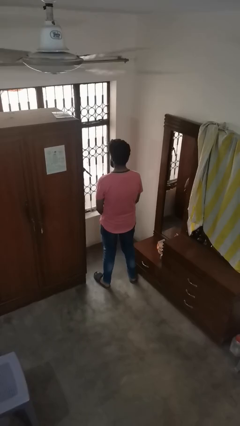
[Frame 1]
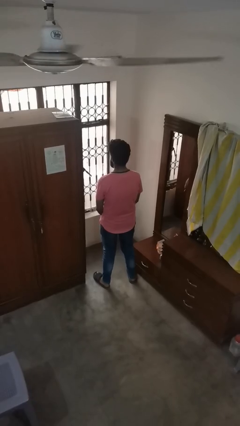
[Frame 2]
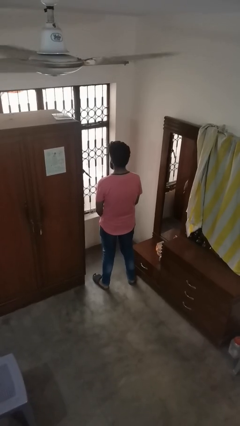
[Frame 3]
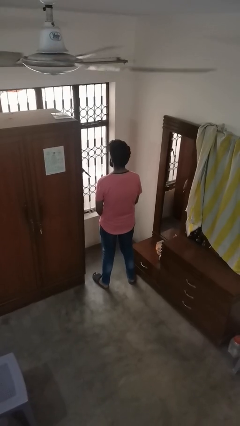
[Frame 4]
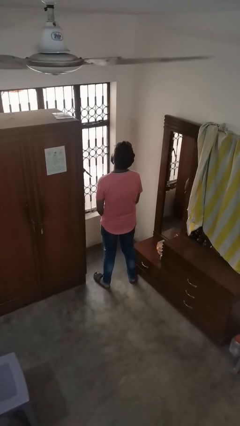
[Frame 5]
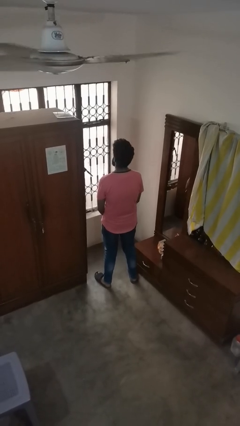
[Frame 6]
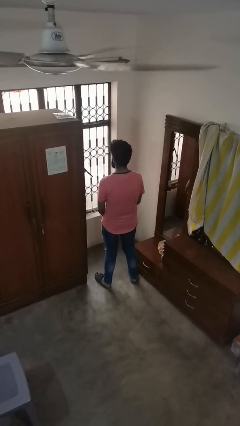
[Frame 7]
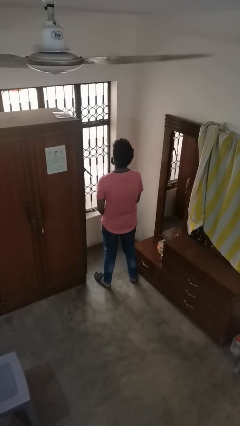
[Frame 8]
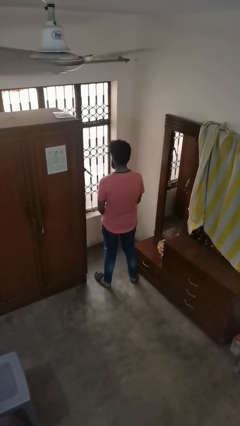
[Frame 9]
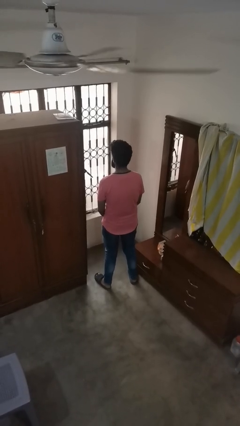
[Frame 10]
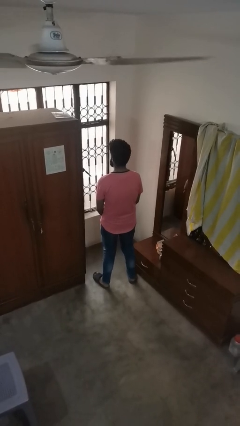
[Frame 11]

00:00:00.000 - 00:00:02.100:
person nods head

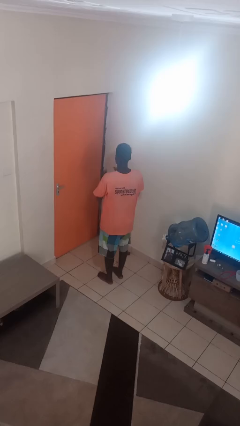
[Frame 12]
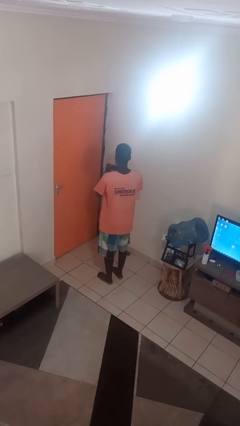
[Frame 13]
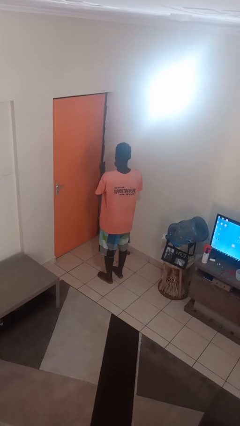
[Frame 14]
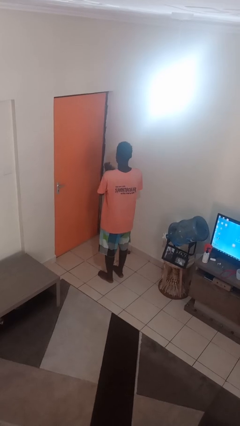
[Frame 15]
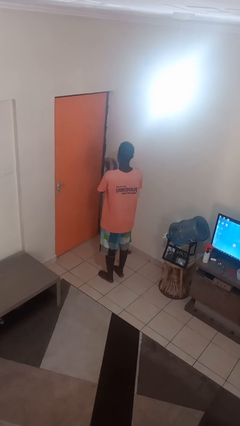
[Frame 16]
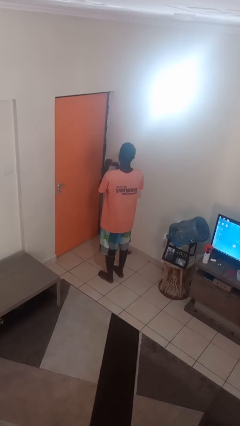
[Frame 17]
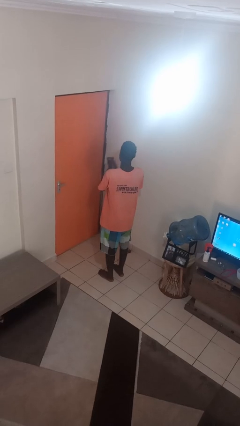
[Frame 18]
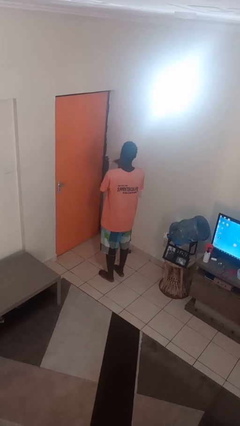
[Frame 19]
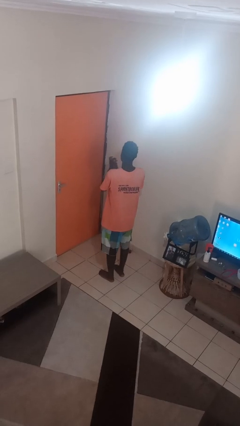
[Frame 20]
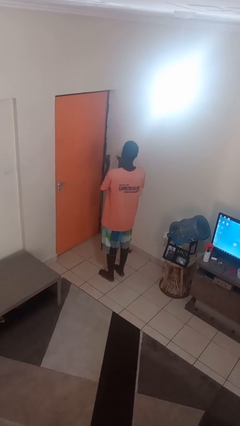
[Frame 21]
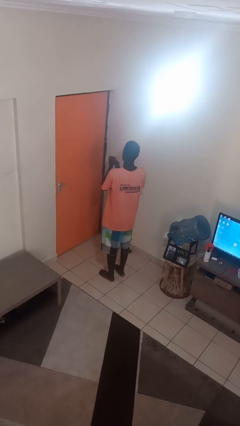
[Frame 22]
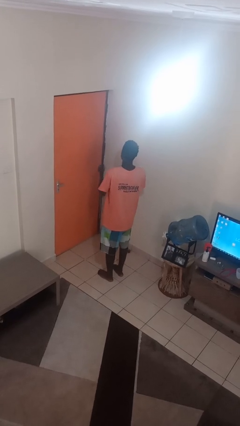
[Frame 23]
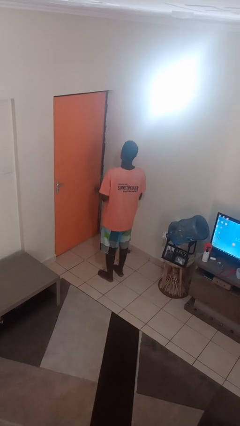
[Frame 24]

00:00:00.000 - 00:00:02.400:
person claps hands

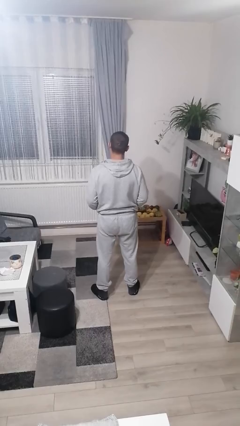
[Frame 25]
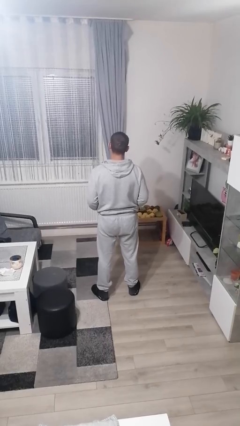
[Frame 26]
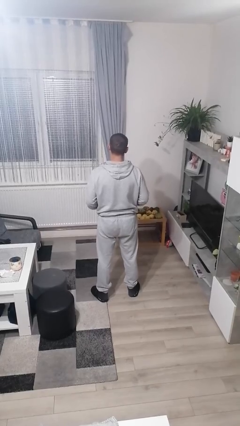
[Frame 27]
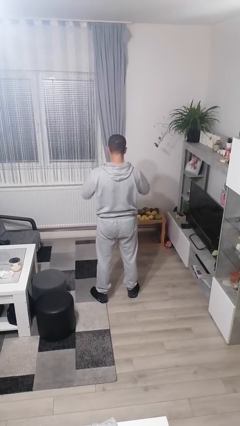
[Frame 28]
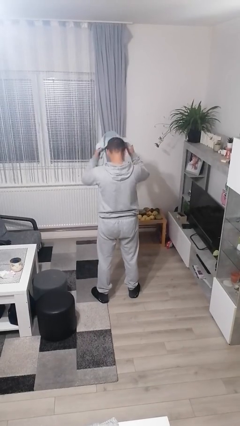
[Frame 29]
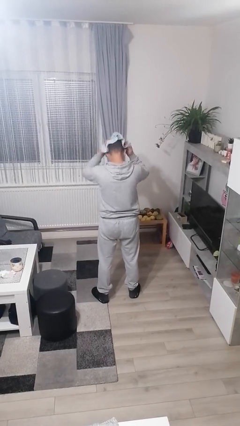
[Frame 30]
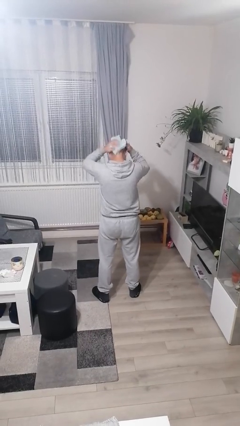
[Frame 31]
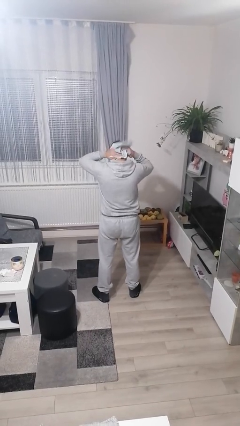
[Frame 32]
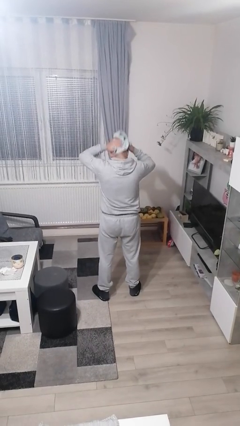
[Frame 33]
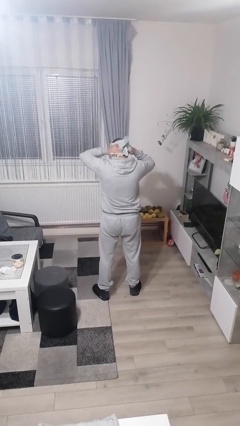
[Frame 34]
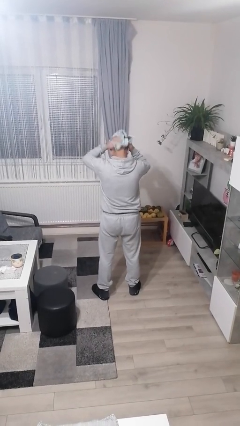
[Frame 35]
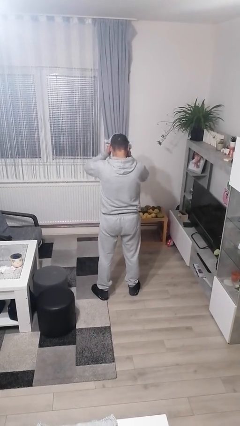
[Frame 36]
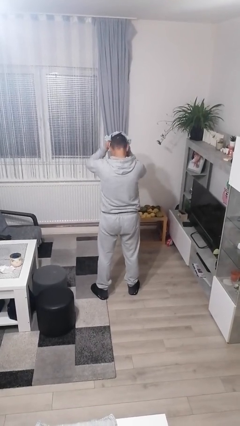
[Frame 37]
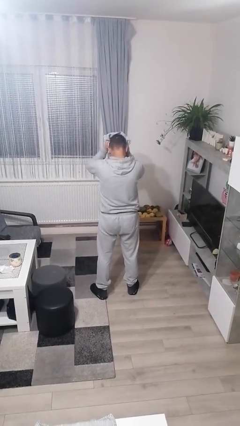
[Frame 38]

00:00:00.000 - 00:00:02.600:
person dries hair with towel

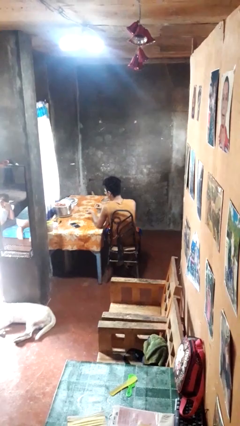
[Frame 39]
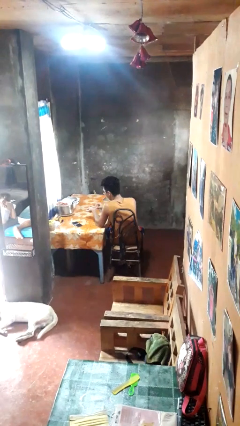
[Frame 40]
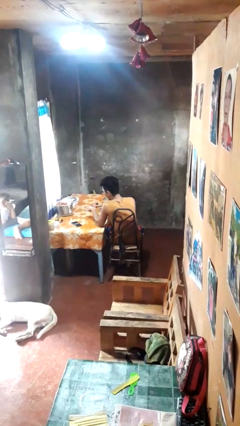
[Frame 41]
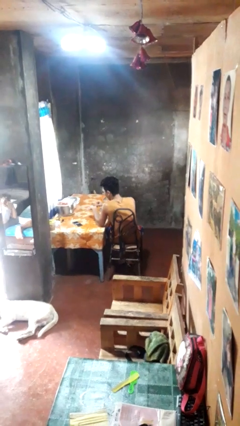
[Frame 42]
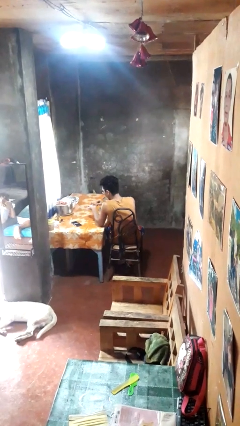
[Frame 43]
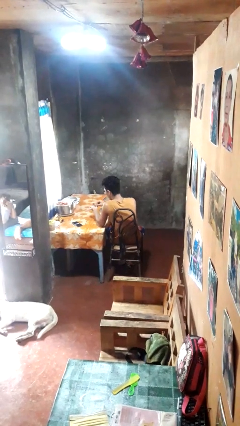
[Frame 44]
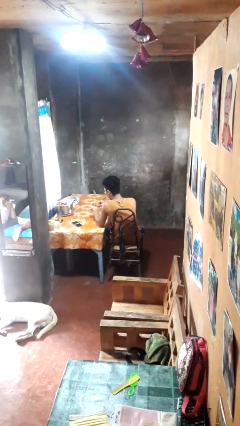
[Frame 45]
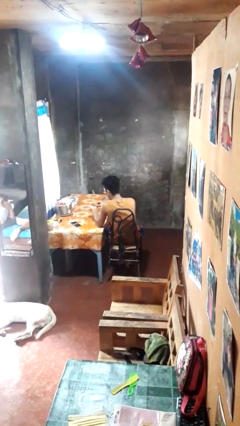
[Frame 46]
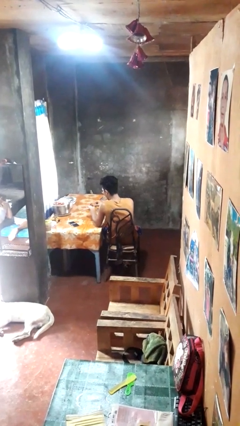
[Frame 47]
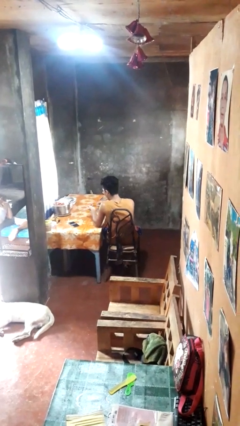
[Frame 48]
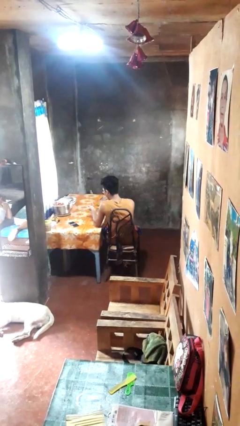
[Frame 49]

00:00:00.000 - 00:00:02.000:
person files fingernails

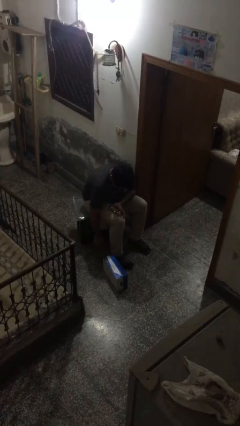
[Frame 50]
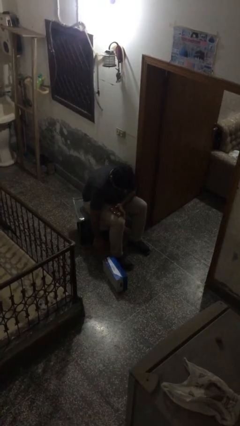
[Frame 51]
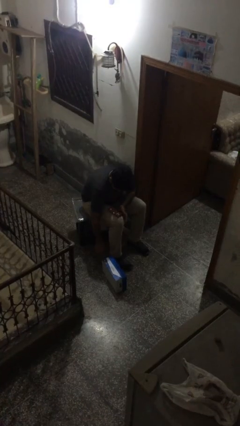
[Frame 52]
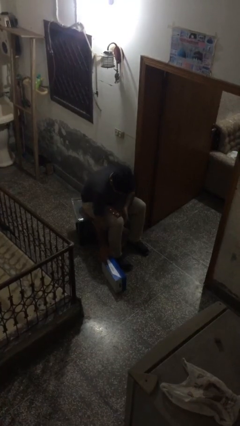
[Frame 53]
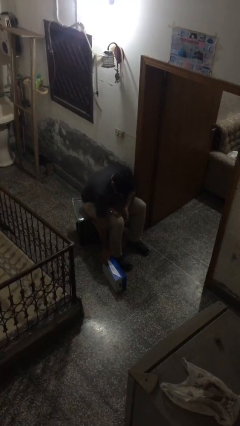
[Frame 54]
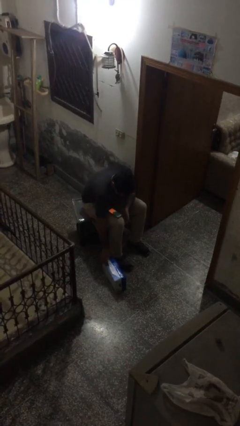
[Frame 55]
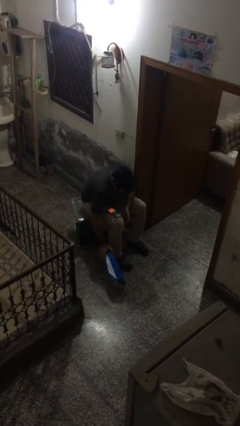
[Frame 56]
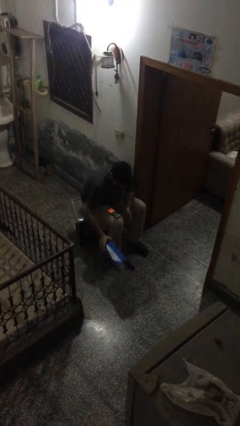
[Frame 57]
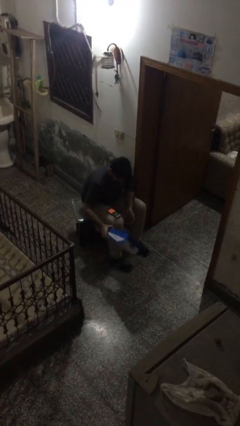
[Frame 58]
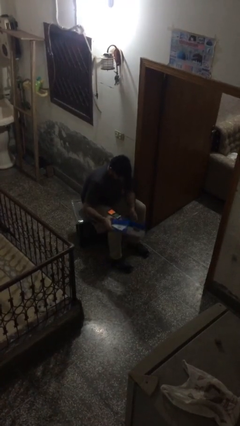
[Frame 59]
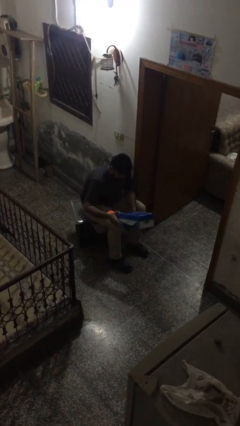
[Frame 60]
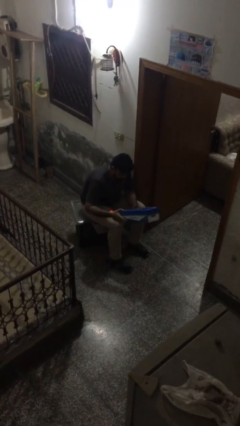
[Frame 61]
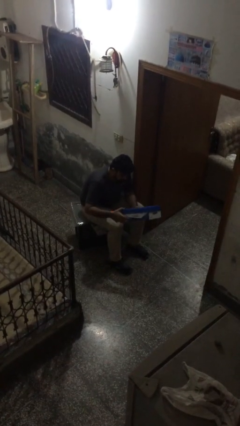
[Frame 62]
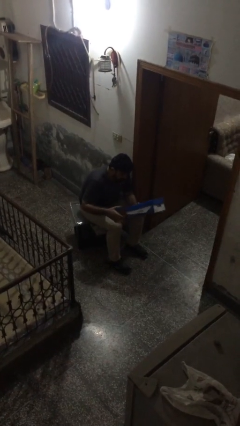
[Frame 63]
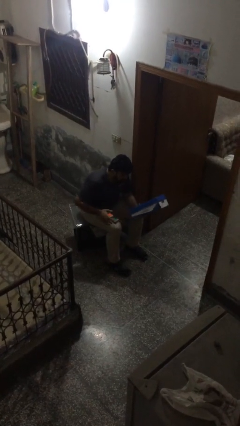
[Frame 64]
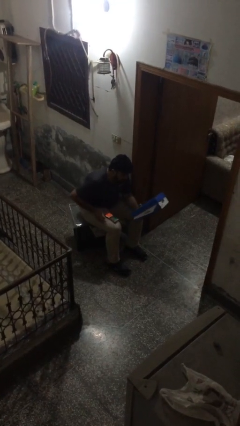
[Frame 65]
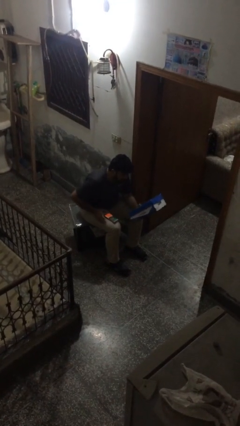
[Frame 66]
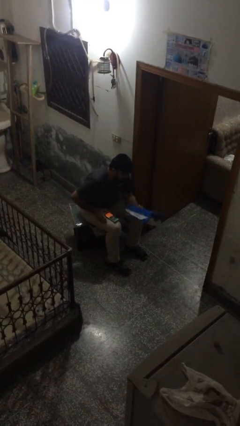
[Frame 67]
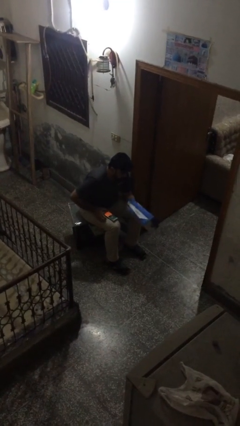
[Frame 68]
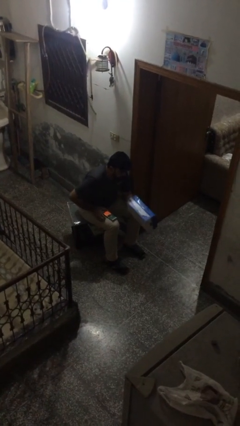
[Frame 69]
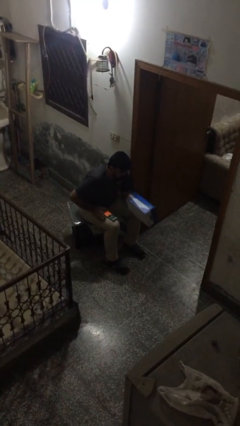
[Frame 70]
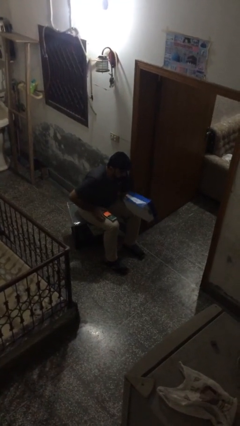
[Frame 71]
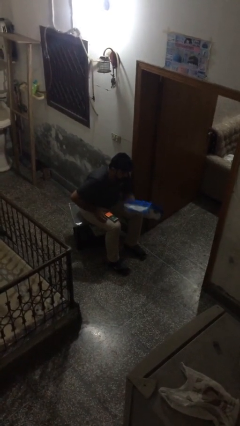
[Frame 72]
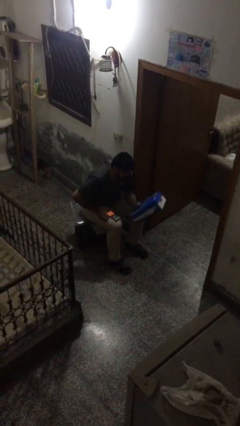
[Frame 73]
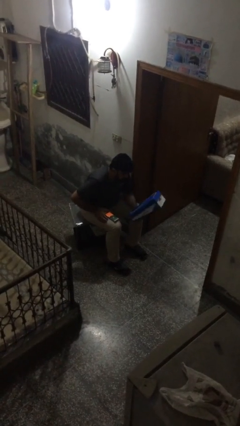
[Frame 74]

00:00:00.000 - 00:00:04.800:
person picks up object from floor

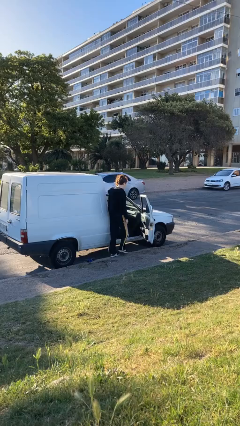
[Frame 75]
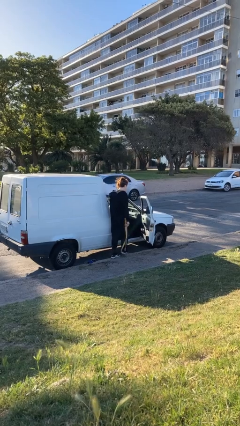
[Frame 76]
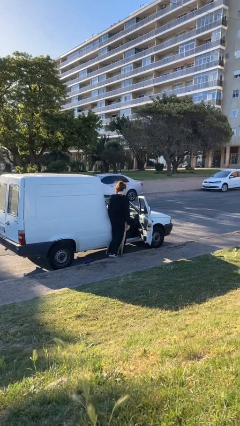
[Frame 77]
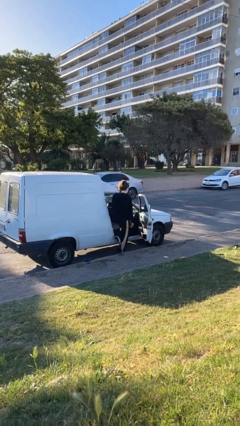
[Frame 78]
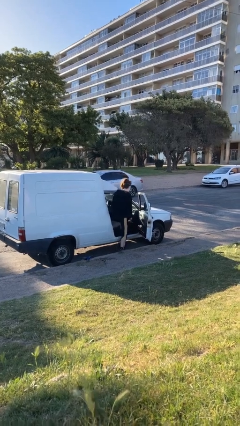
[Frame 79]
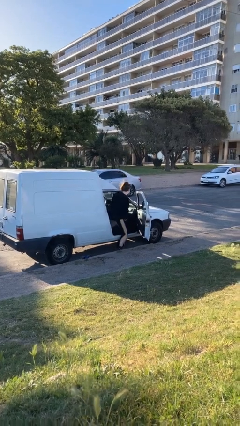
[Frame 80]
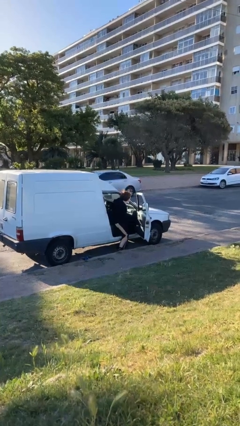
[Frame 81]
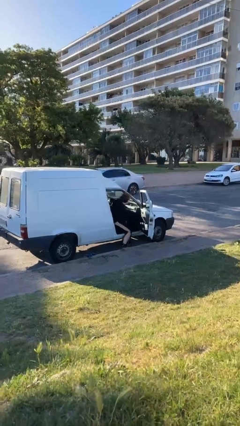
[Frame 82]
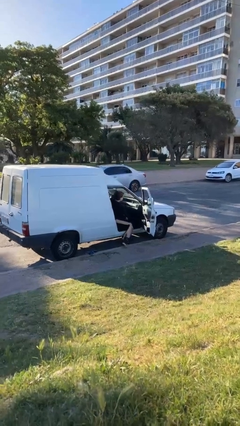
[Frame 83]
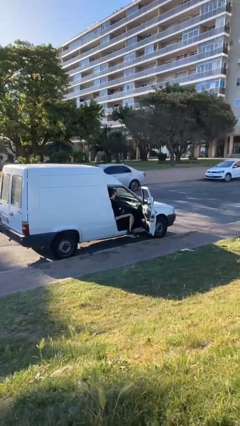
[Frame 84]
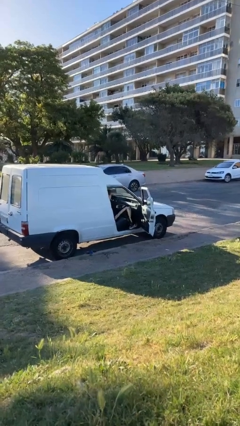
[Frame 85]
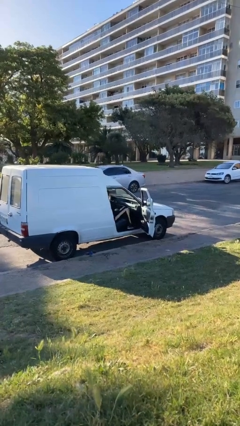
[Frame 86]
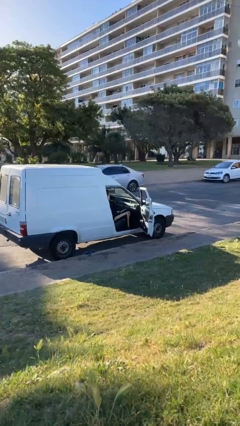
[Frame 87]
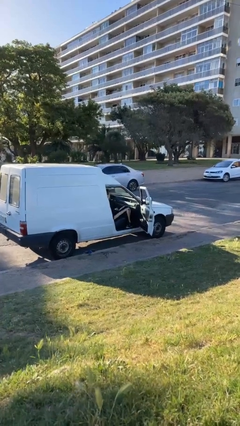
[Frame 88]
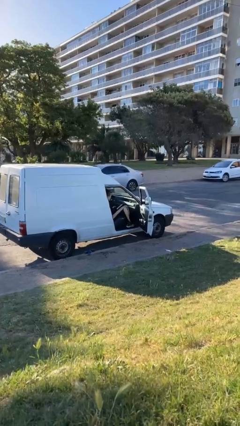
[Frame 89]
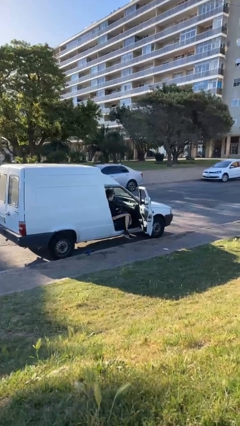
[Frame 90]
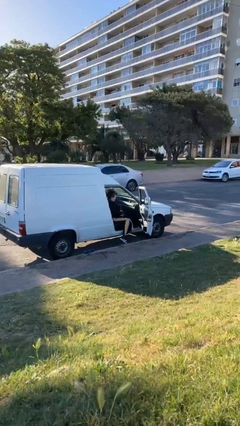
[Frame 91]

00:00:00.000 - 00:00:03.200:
person enters car
